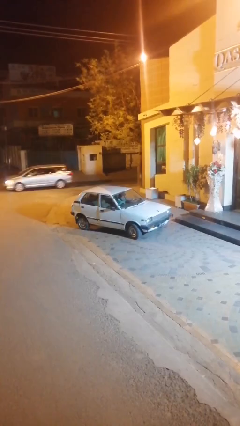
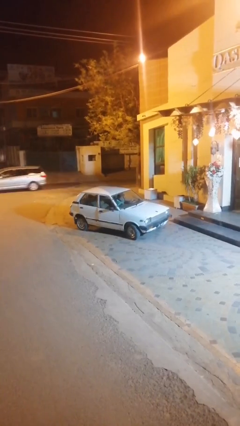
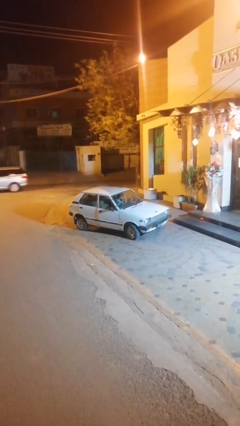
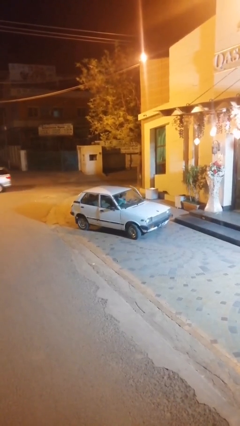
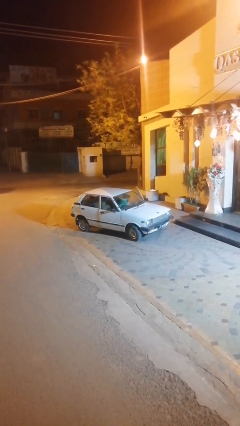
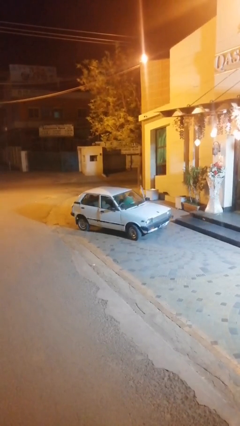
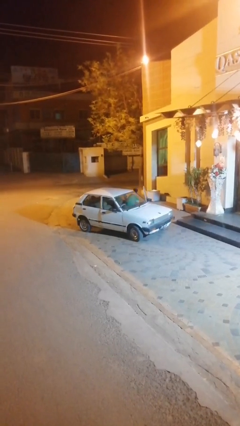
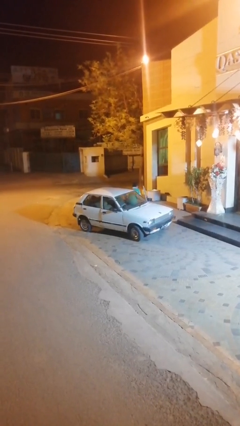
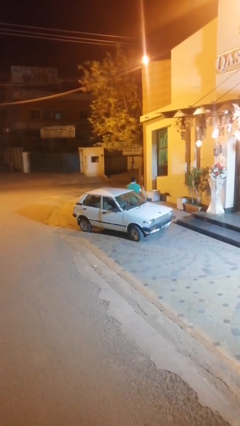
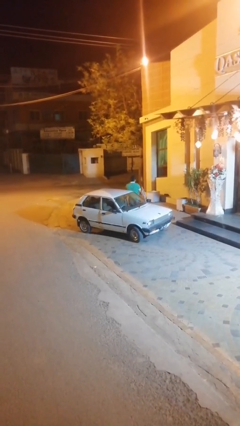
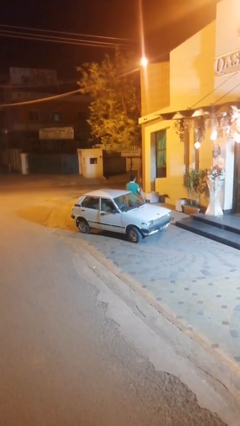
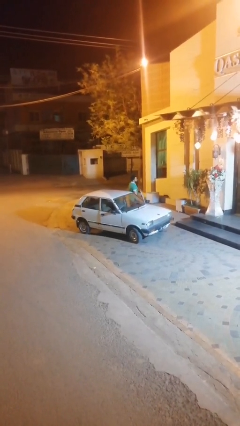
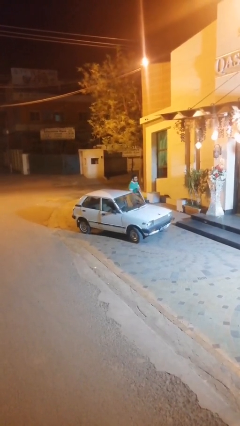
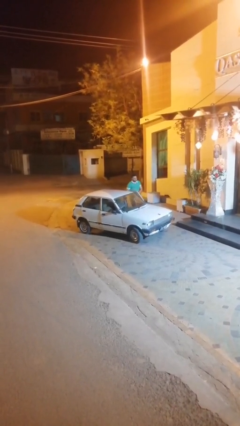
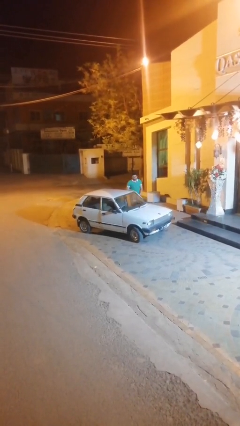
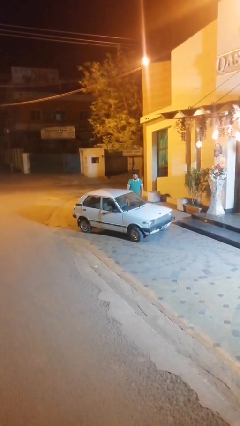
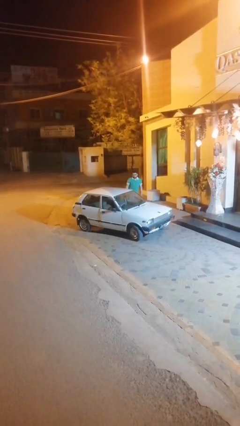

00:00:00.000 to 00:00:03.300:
car drops off person

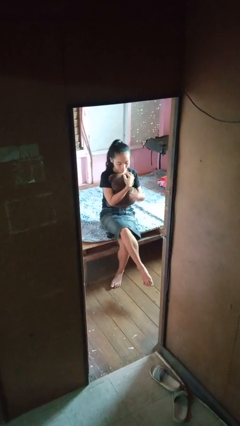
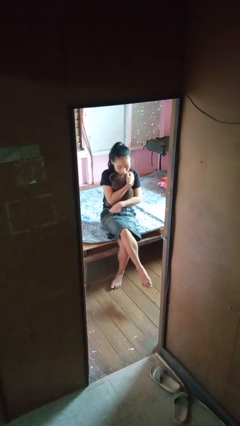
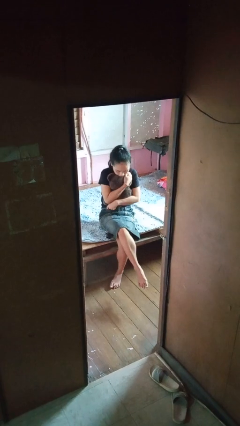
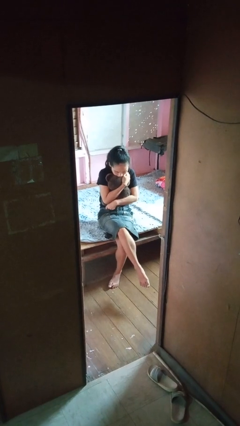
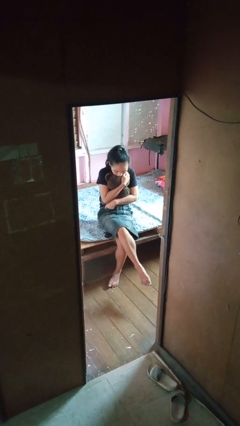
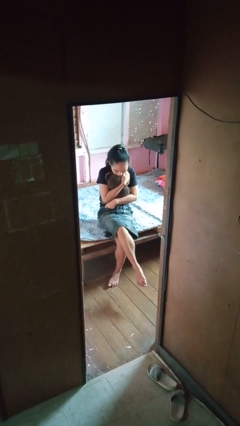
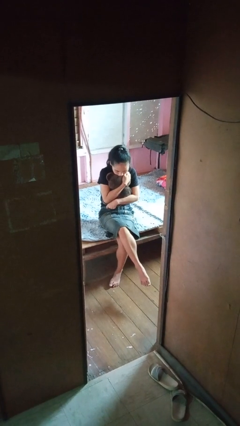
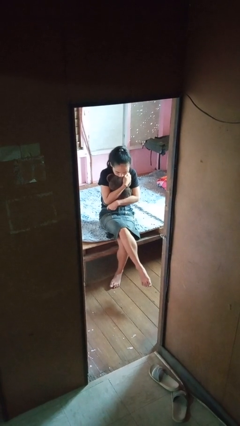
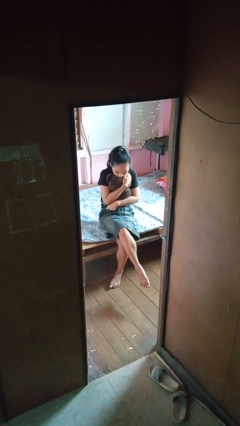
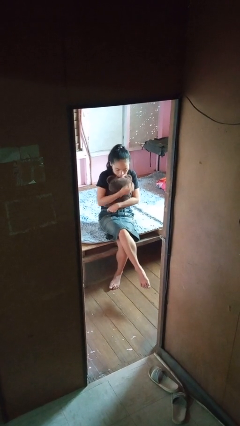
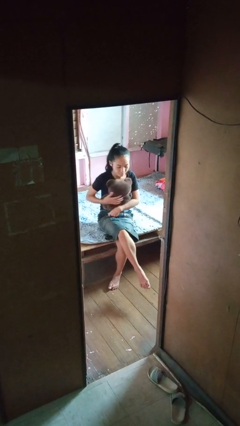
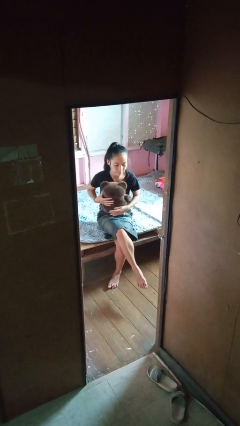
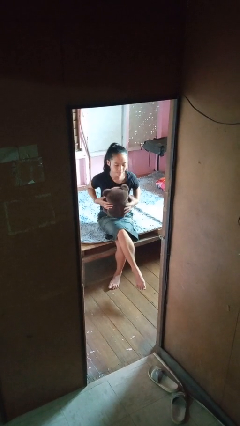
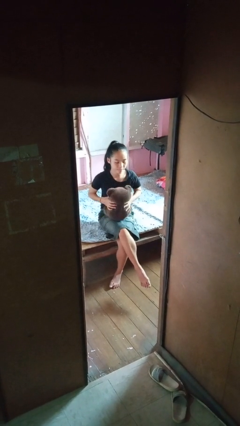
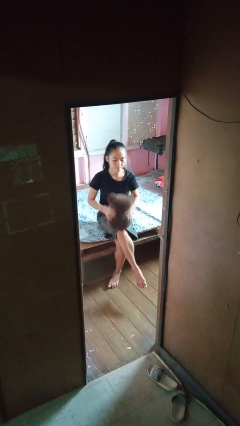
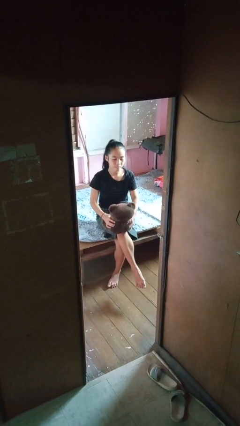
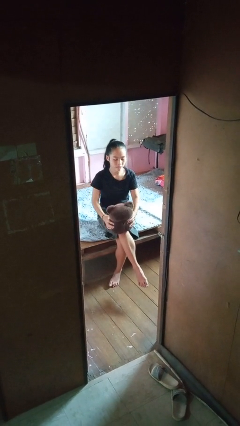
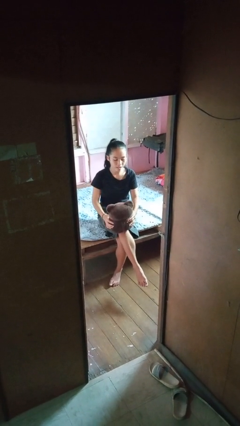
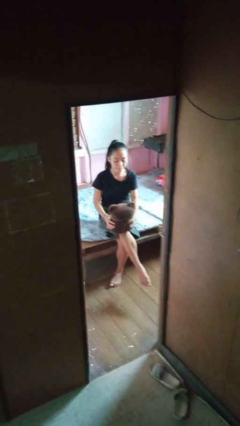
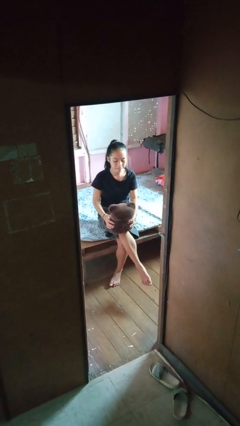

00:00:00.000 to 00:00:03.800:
person hugs stuffed animal

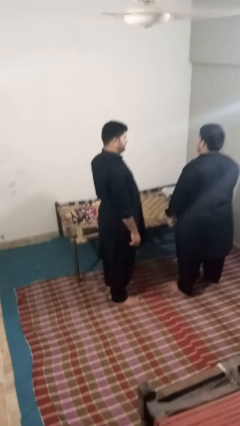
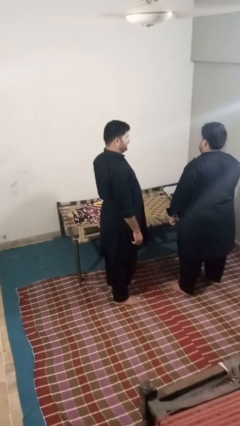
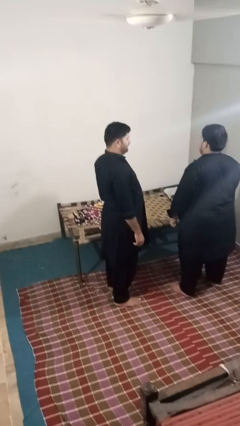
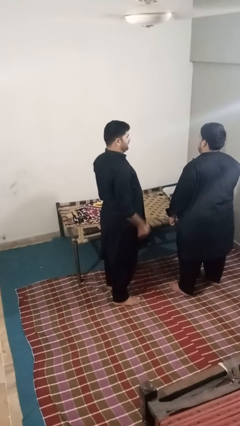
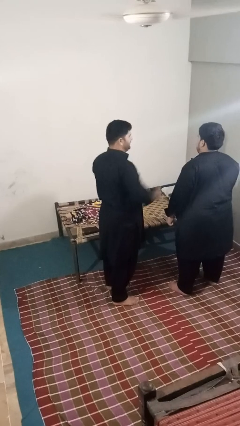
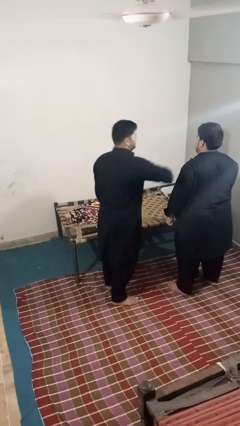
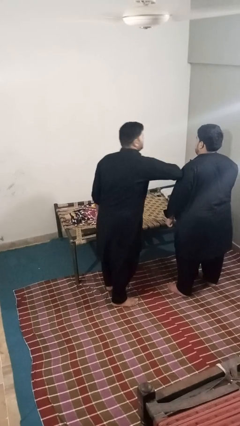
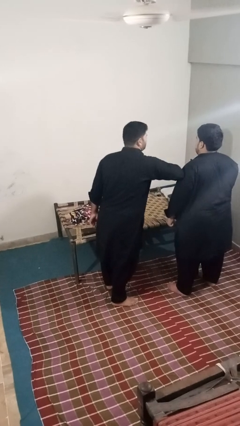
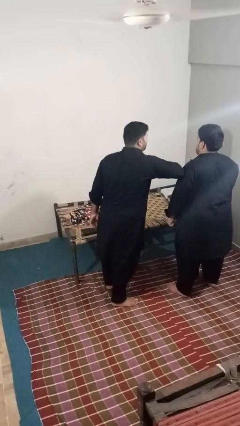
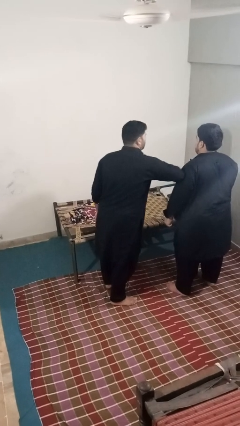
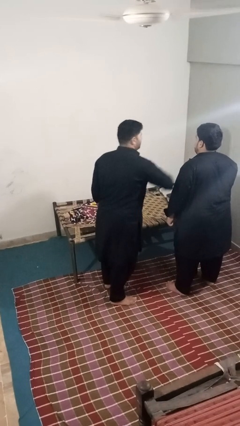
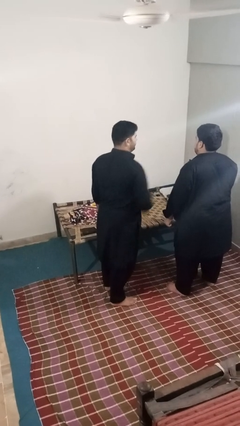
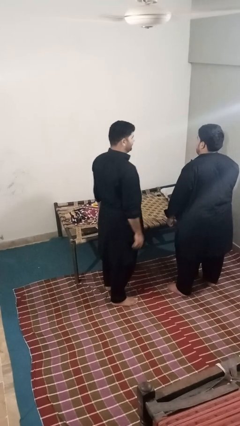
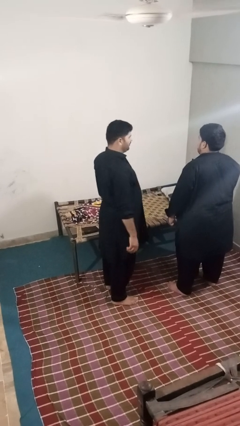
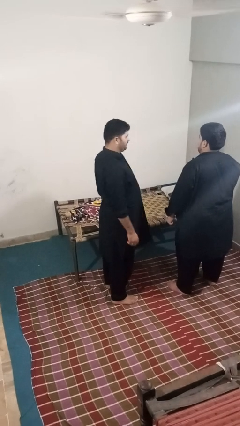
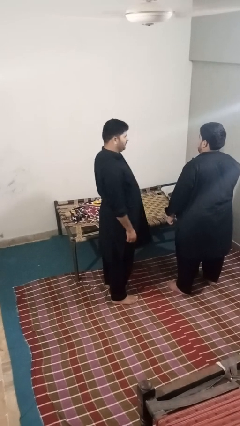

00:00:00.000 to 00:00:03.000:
person nudges person with elbow

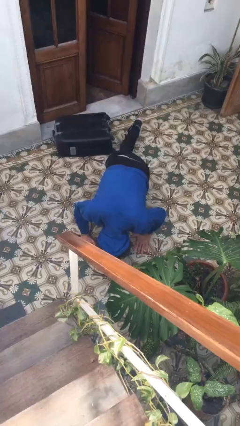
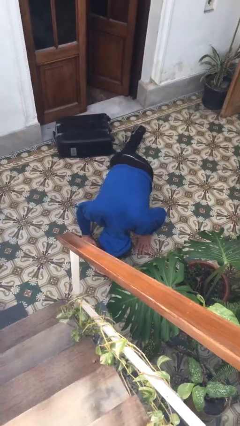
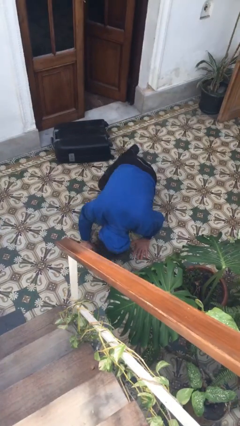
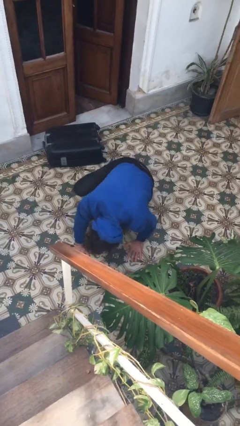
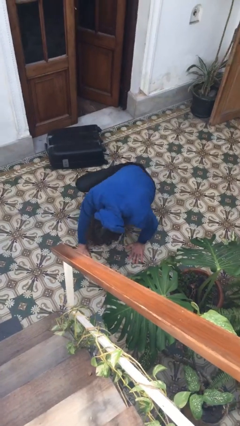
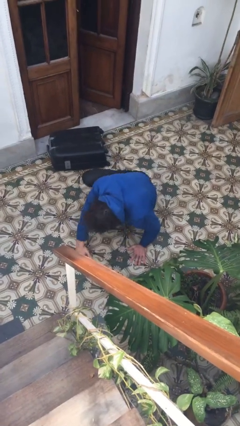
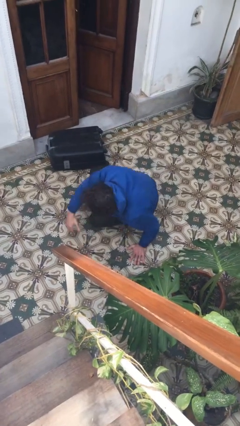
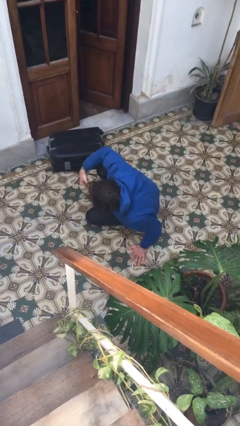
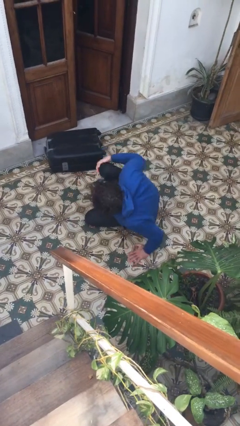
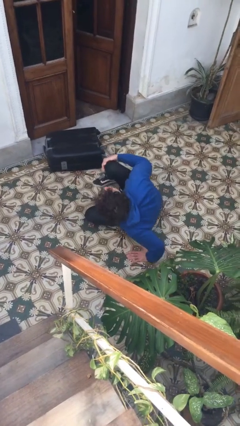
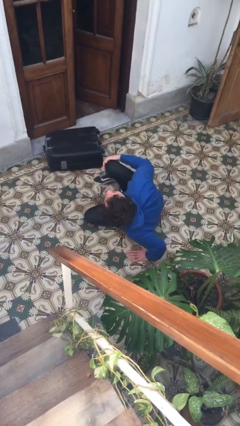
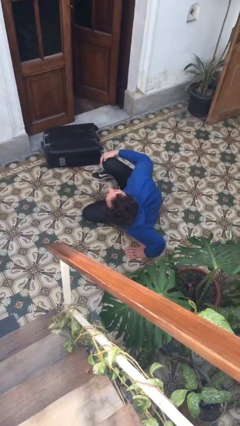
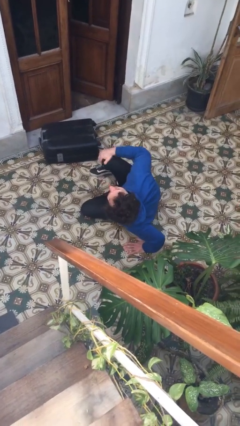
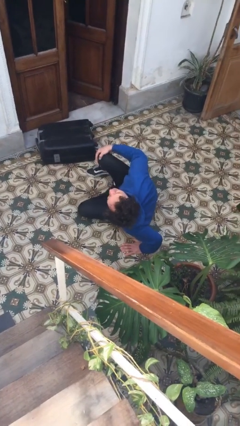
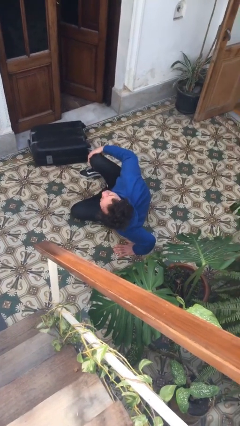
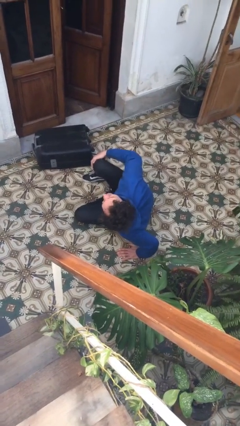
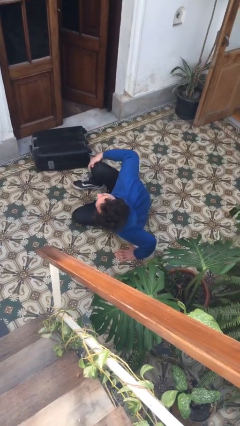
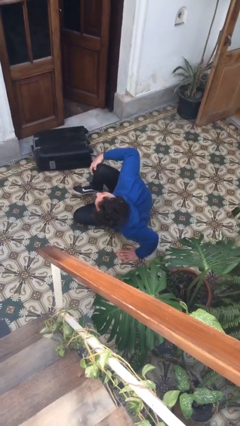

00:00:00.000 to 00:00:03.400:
person lies down on floor

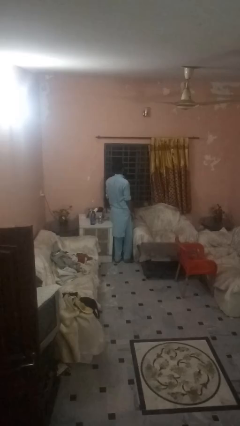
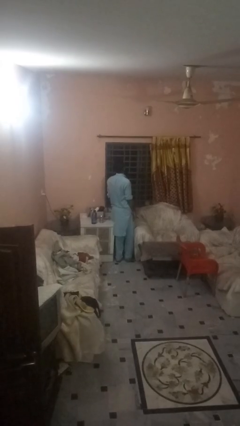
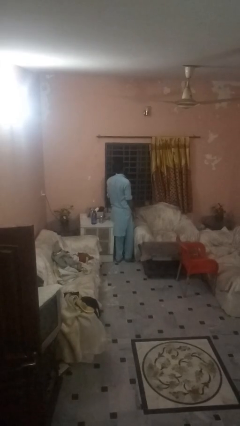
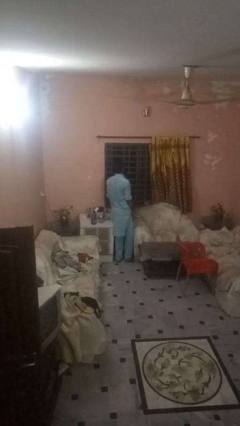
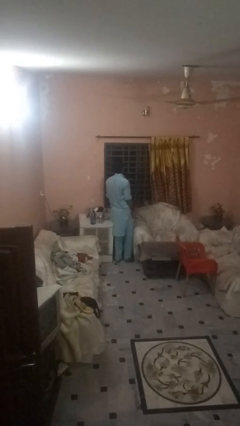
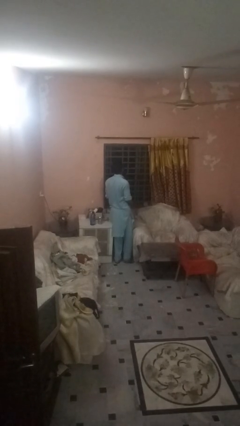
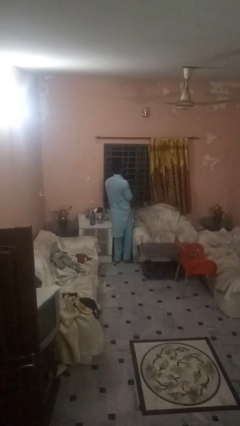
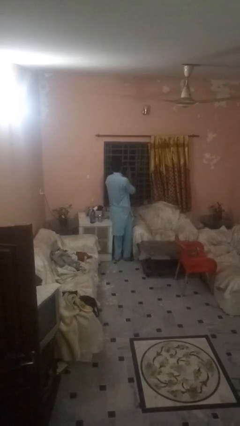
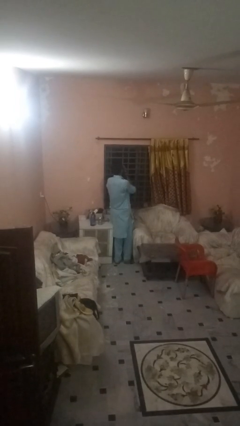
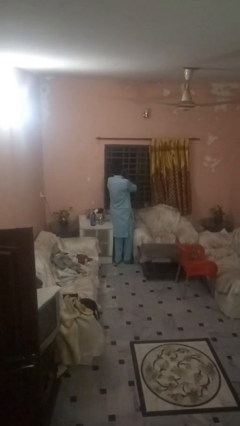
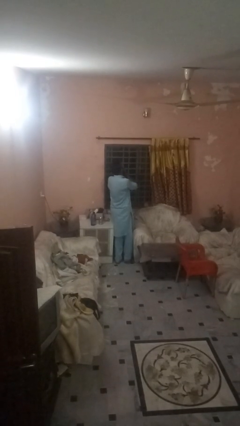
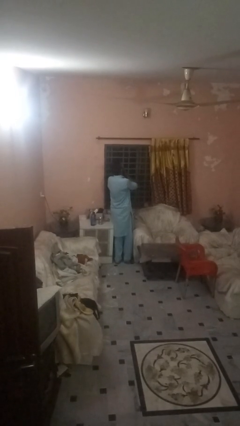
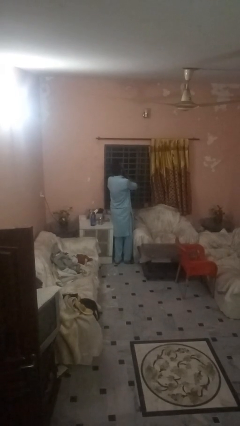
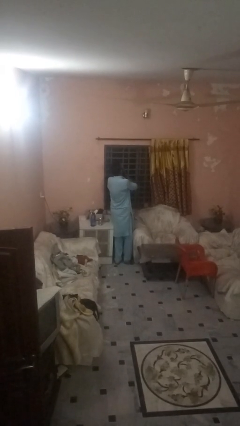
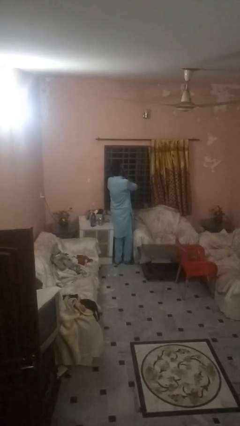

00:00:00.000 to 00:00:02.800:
person covers face with hands

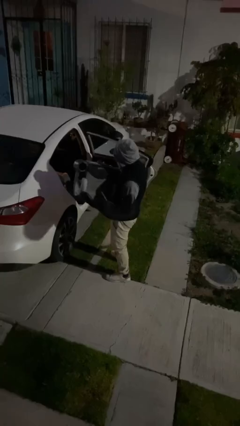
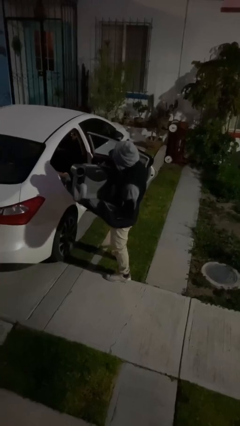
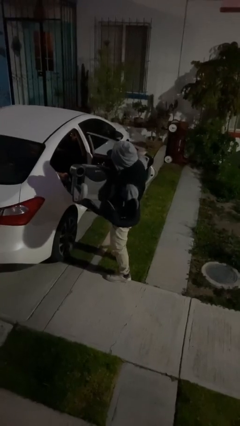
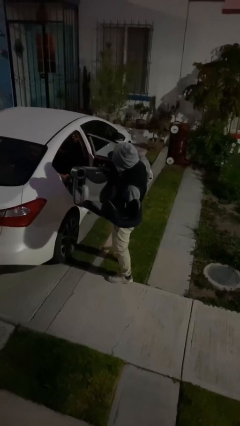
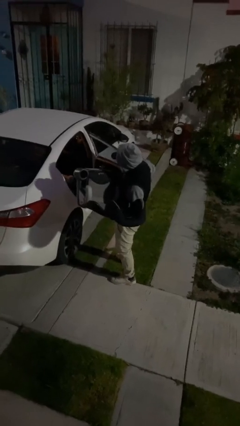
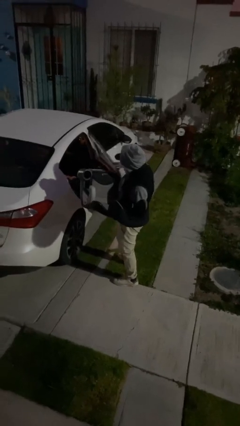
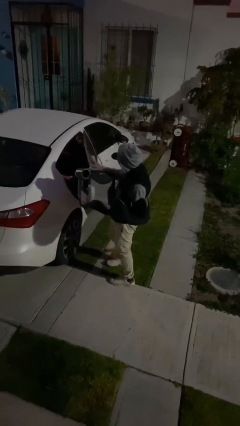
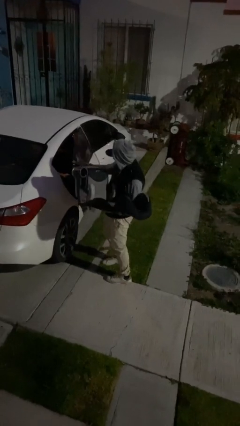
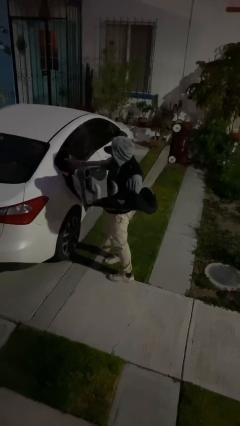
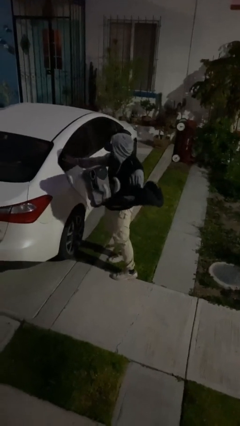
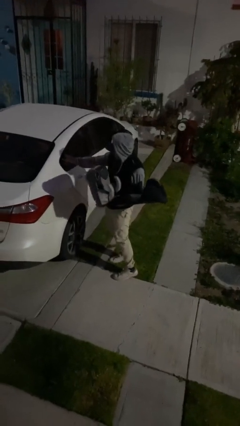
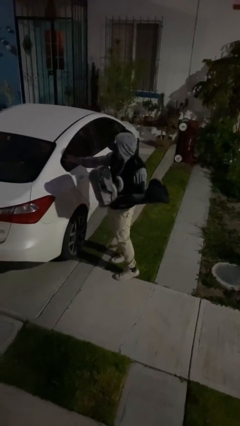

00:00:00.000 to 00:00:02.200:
person closes car door
